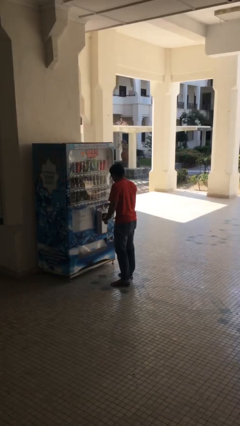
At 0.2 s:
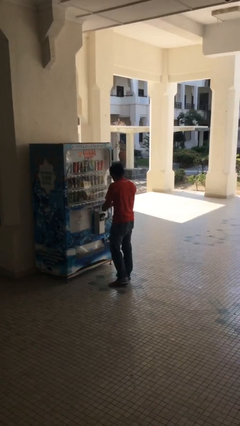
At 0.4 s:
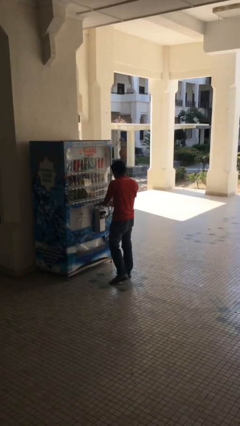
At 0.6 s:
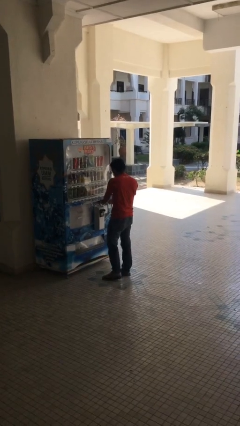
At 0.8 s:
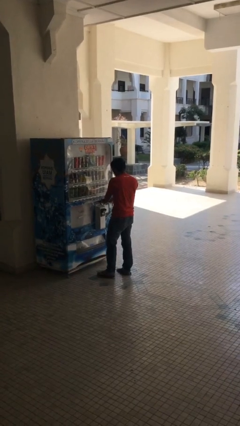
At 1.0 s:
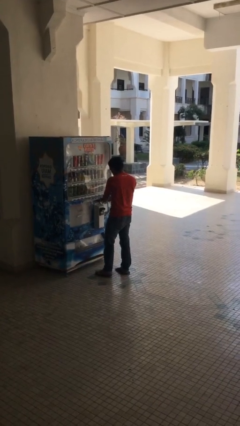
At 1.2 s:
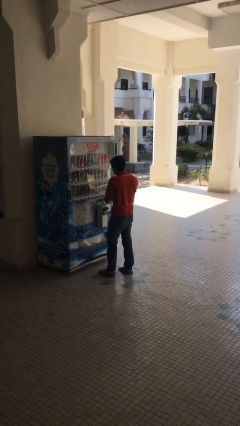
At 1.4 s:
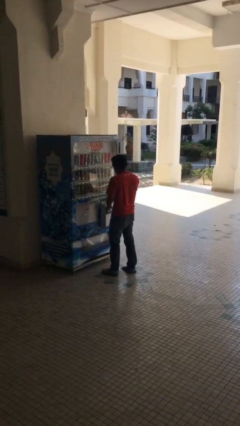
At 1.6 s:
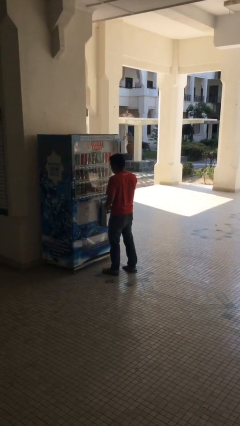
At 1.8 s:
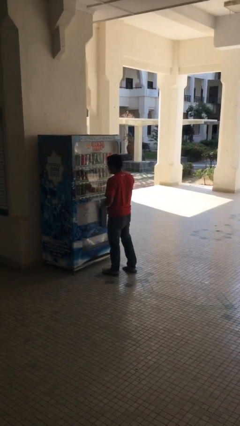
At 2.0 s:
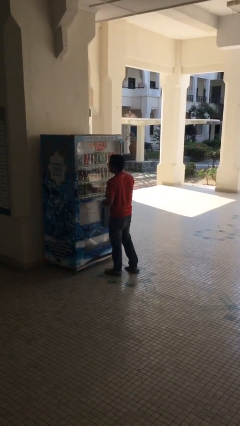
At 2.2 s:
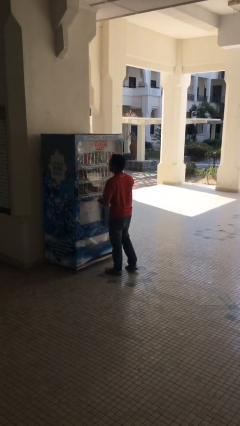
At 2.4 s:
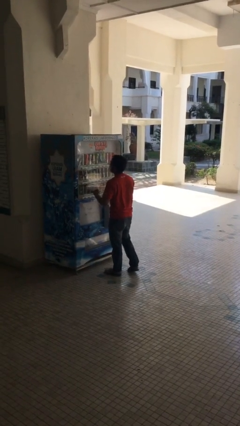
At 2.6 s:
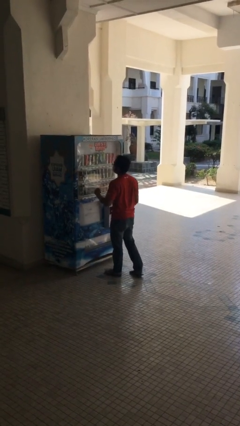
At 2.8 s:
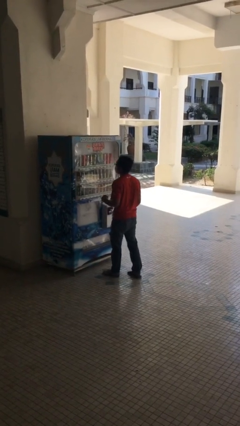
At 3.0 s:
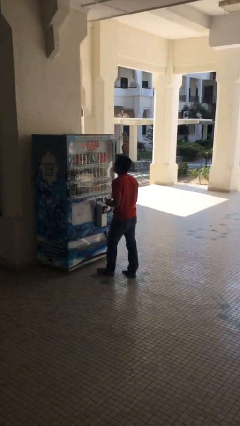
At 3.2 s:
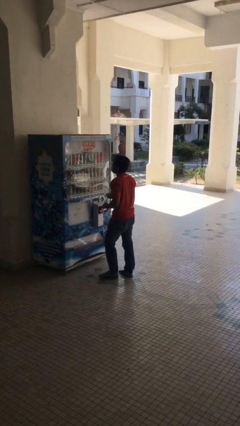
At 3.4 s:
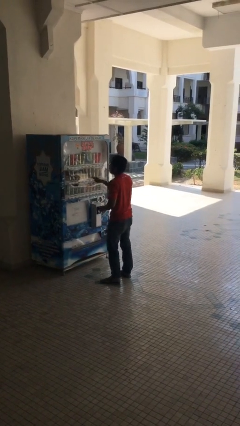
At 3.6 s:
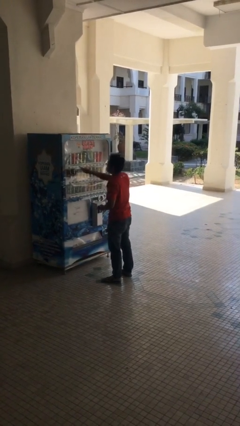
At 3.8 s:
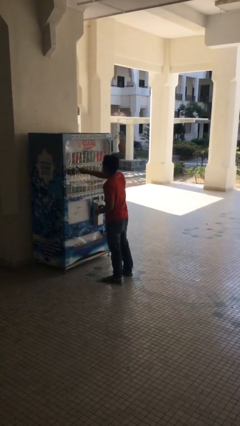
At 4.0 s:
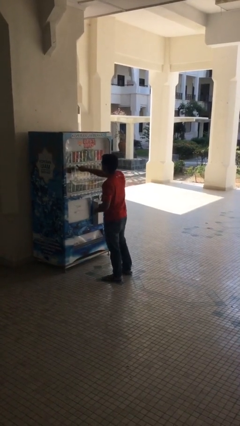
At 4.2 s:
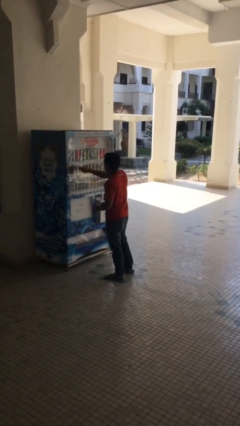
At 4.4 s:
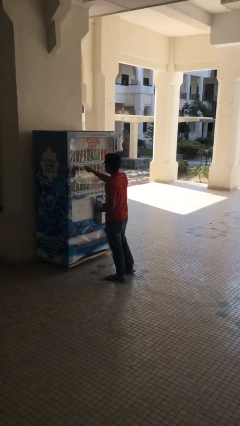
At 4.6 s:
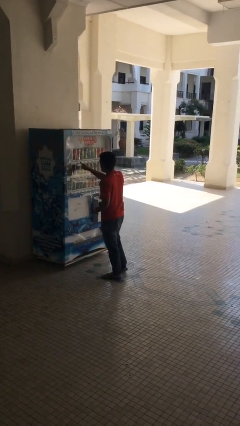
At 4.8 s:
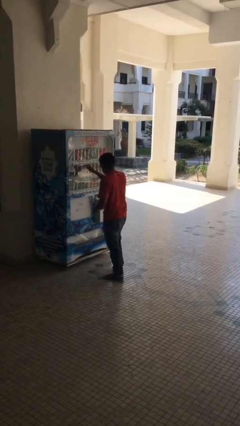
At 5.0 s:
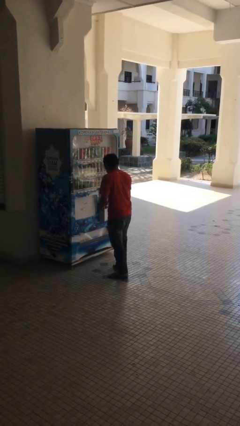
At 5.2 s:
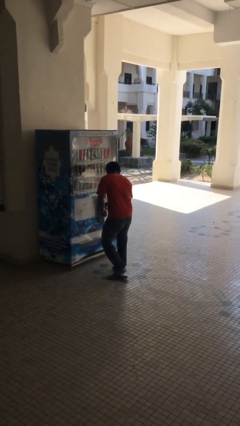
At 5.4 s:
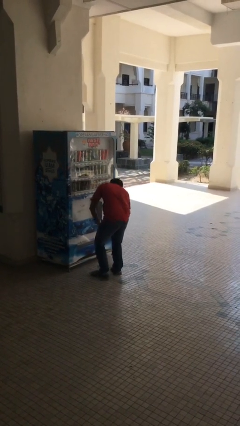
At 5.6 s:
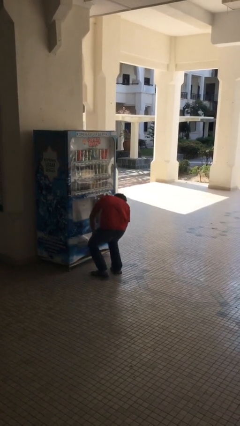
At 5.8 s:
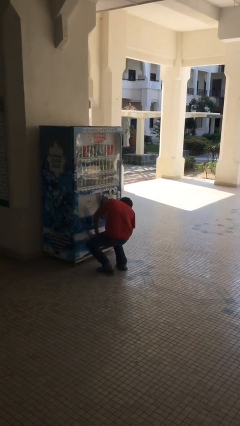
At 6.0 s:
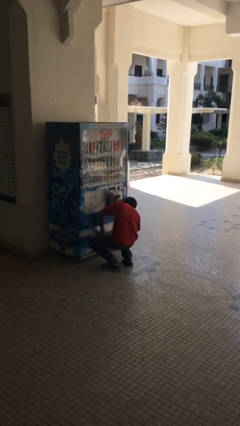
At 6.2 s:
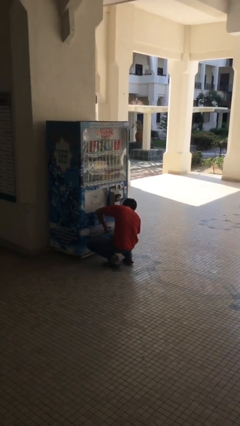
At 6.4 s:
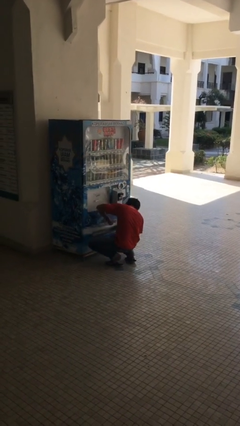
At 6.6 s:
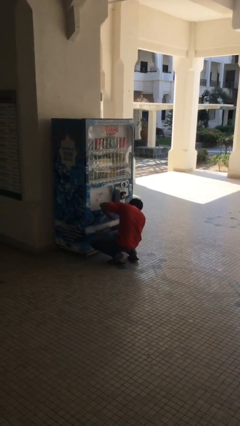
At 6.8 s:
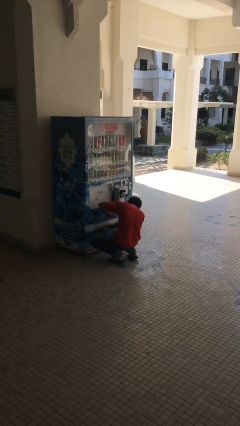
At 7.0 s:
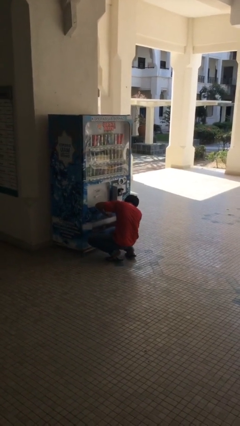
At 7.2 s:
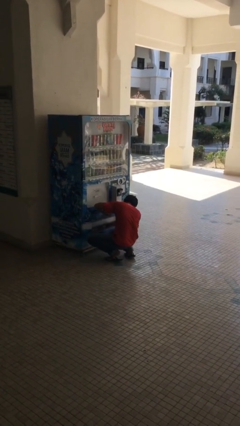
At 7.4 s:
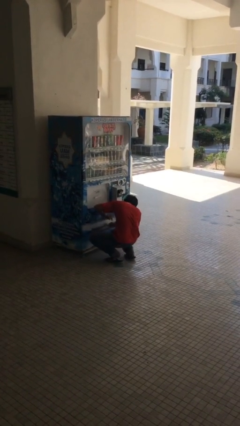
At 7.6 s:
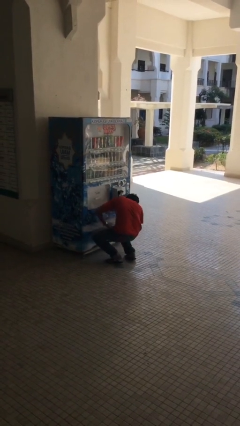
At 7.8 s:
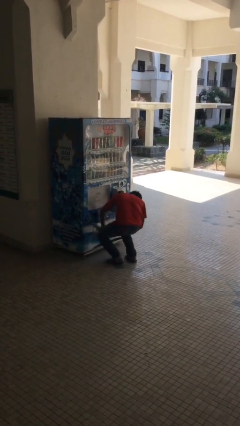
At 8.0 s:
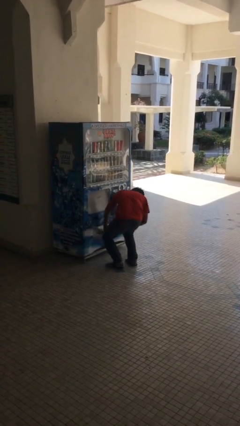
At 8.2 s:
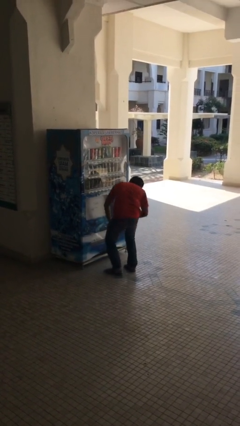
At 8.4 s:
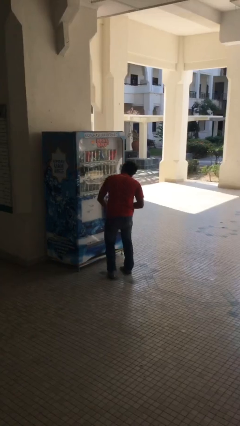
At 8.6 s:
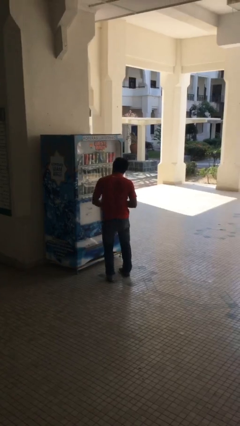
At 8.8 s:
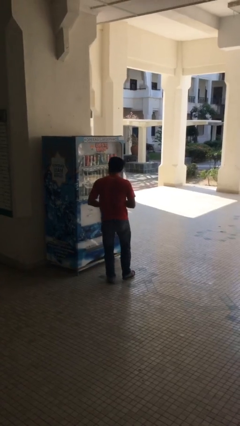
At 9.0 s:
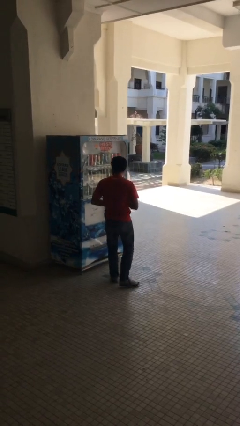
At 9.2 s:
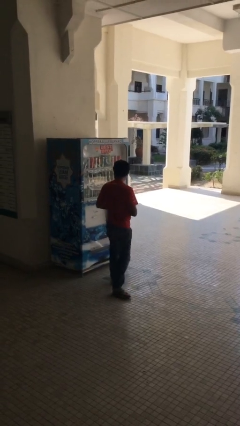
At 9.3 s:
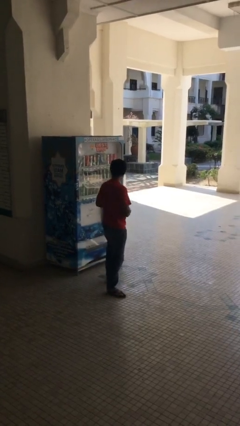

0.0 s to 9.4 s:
person purchases from machine

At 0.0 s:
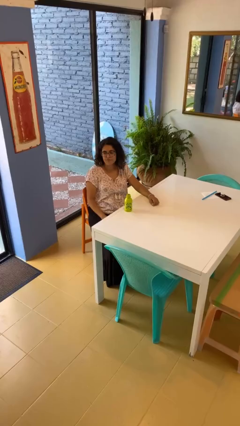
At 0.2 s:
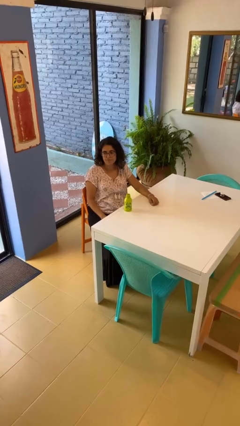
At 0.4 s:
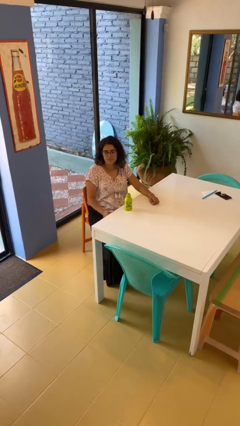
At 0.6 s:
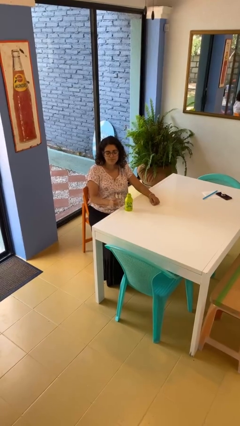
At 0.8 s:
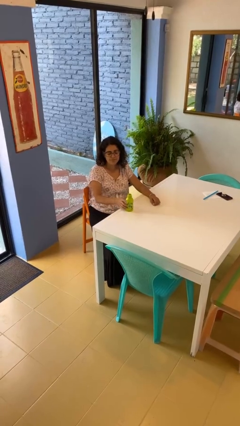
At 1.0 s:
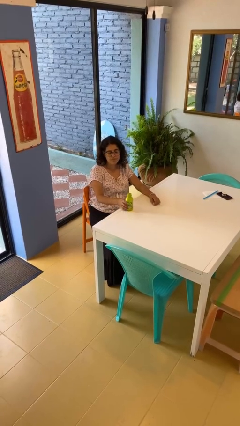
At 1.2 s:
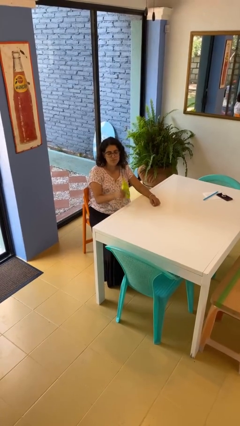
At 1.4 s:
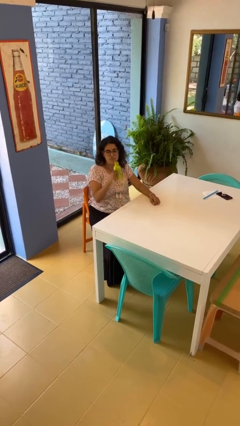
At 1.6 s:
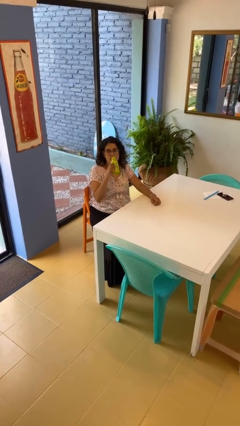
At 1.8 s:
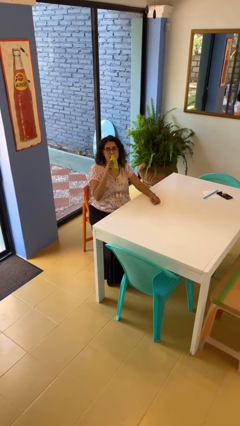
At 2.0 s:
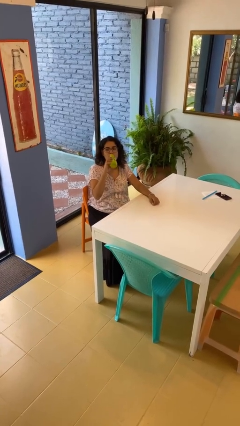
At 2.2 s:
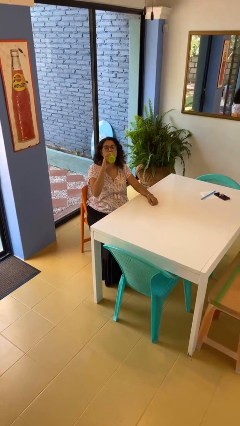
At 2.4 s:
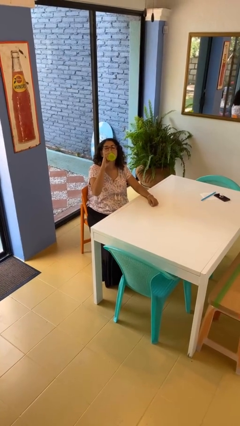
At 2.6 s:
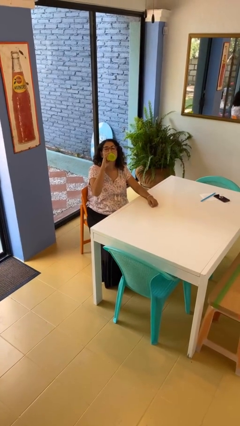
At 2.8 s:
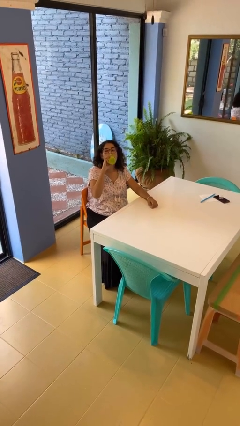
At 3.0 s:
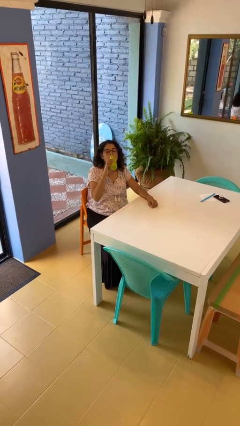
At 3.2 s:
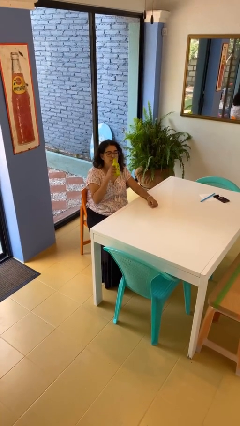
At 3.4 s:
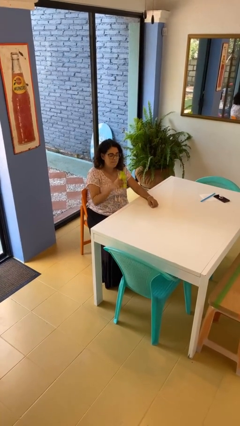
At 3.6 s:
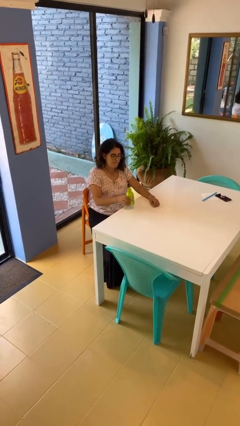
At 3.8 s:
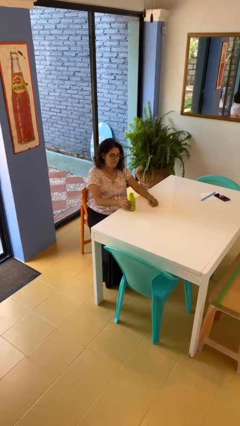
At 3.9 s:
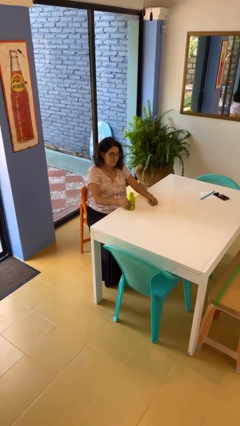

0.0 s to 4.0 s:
person drinks from bottle

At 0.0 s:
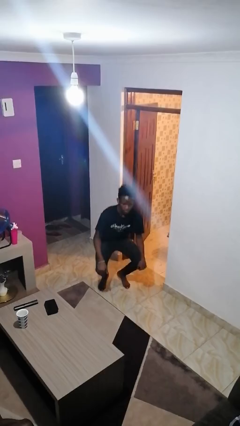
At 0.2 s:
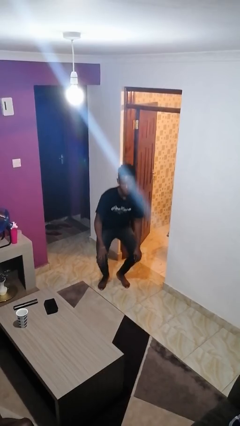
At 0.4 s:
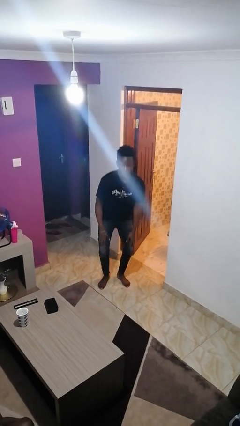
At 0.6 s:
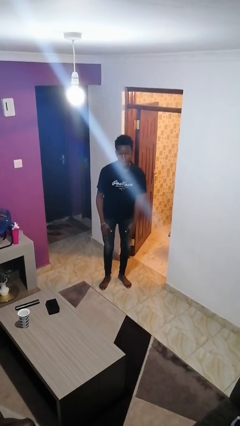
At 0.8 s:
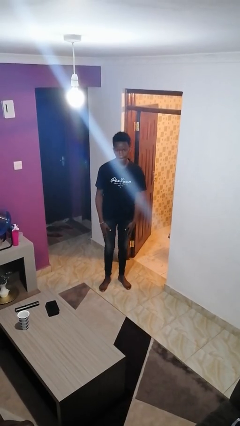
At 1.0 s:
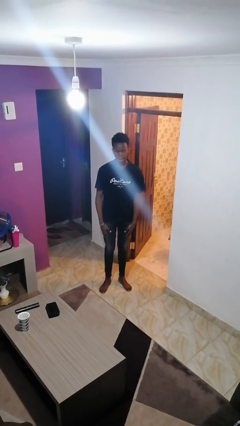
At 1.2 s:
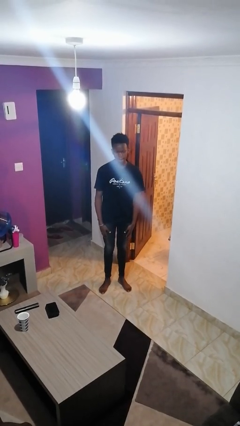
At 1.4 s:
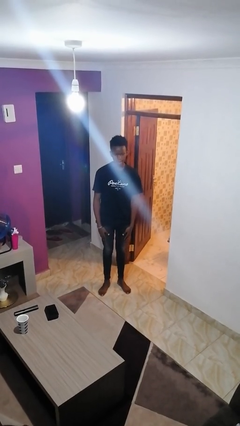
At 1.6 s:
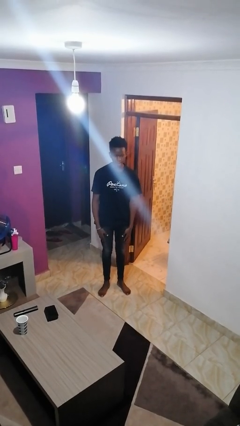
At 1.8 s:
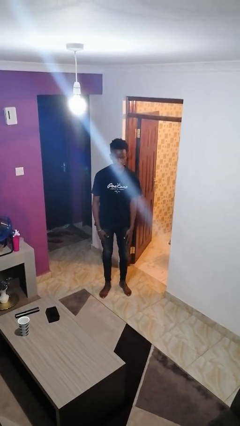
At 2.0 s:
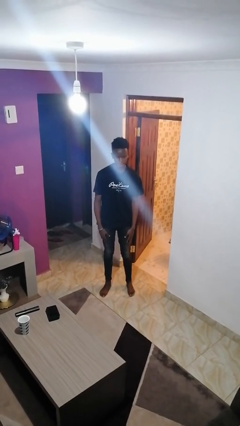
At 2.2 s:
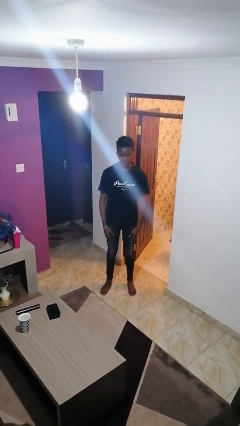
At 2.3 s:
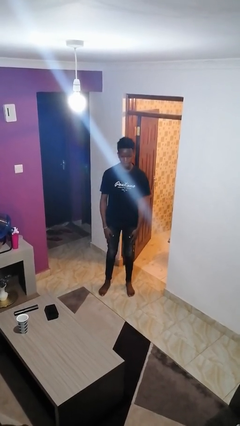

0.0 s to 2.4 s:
person stands up

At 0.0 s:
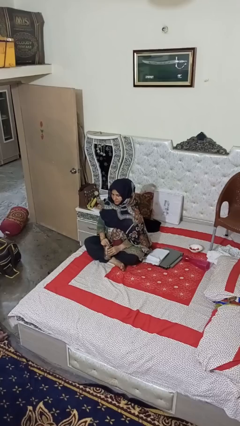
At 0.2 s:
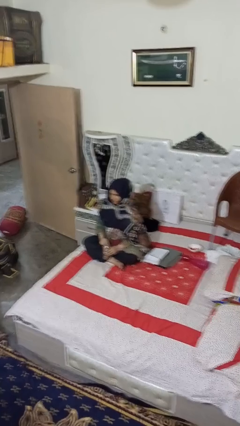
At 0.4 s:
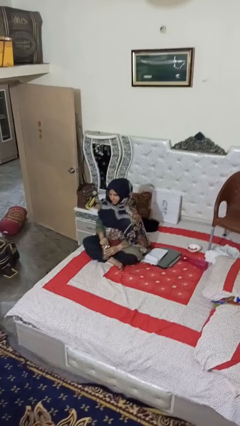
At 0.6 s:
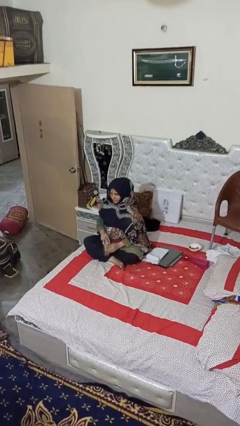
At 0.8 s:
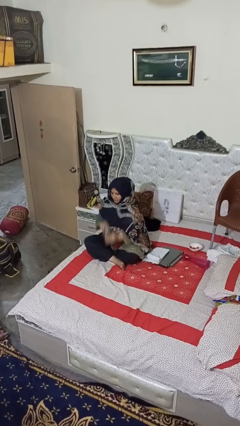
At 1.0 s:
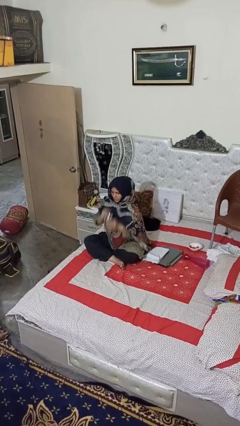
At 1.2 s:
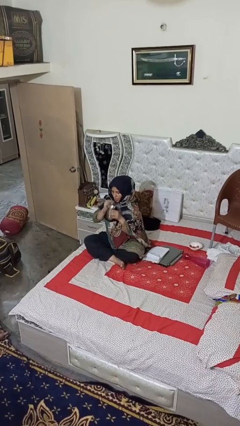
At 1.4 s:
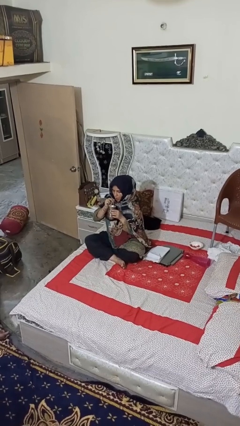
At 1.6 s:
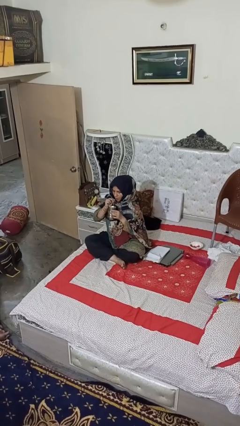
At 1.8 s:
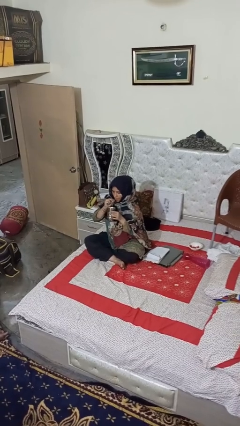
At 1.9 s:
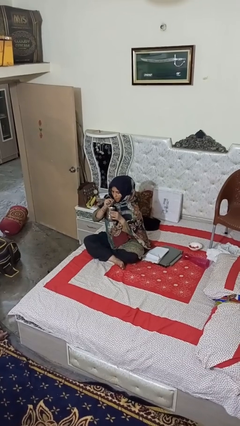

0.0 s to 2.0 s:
person drinks from straw
